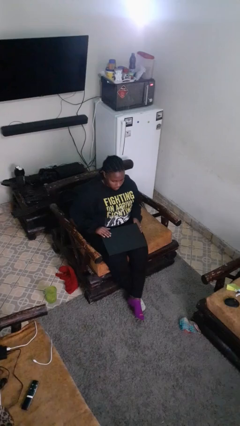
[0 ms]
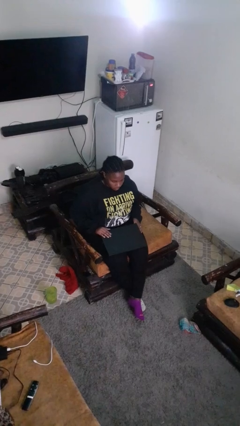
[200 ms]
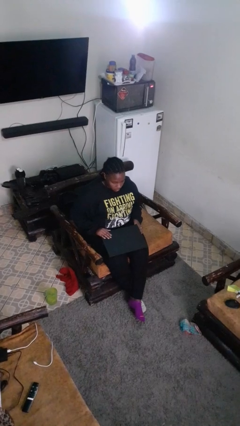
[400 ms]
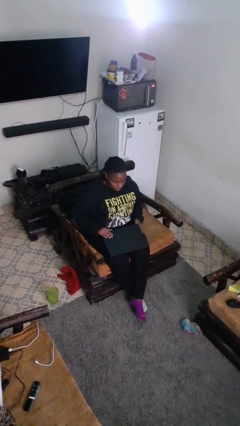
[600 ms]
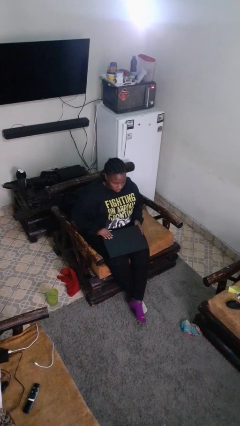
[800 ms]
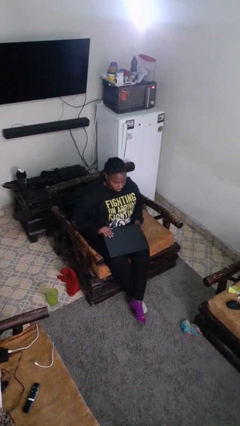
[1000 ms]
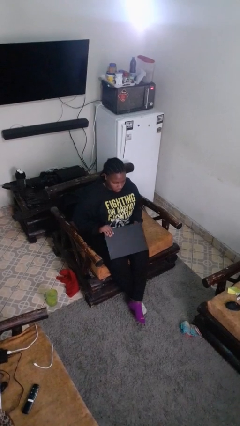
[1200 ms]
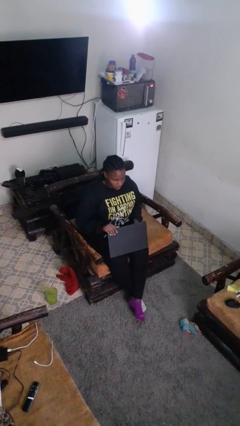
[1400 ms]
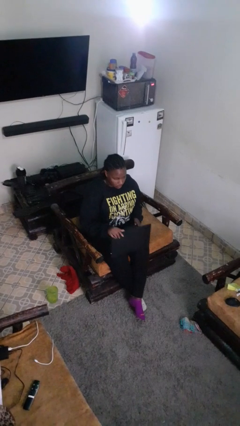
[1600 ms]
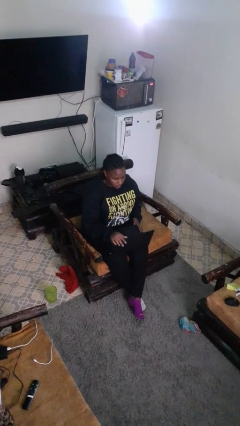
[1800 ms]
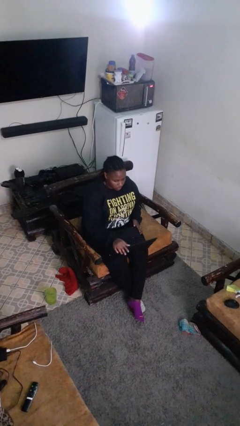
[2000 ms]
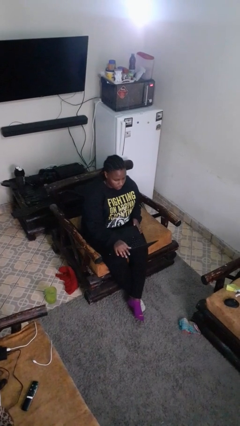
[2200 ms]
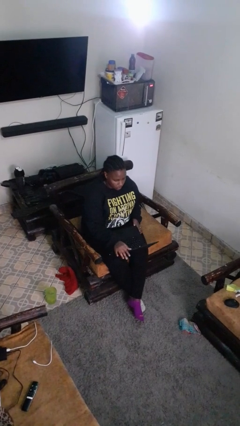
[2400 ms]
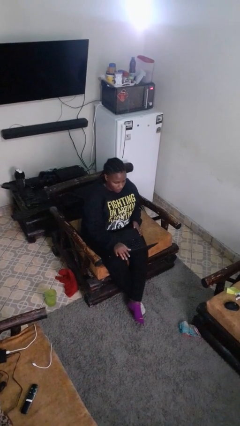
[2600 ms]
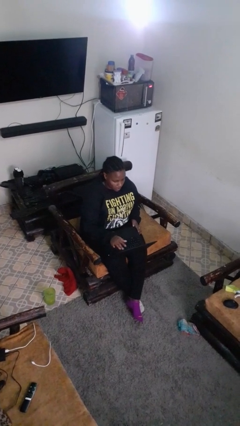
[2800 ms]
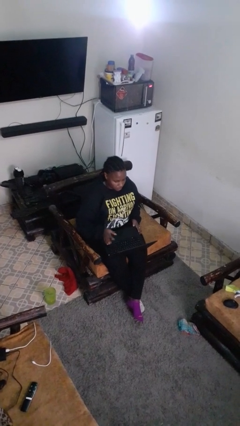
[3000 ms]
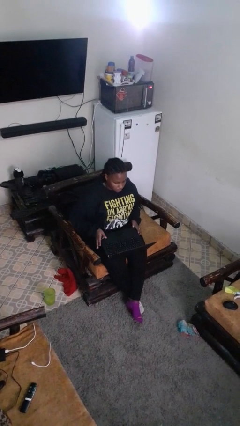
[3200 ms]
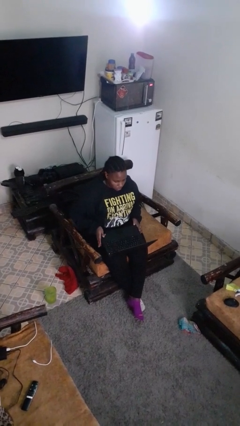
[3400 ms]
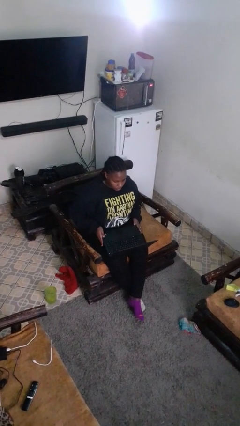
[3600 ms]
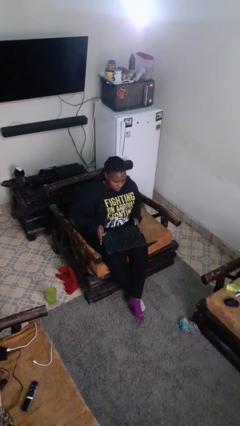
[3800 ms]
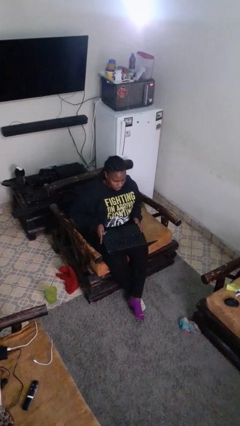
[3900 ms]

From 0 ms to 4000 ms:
person opens laptop

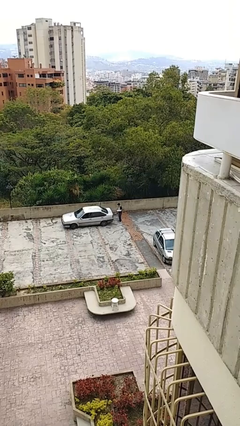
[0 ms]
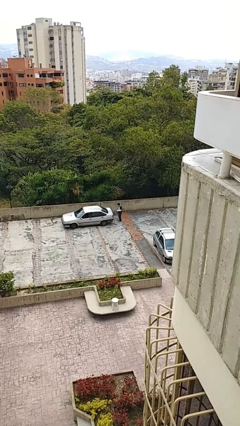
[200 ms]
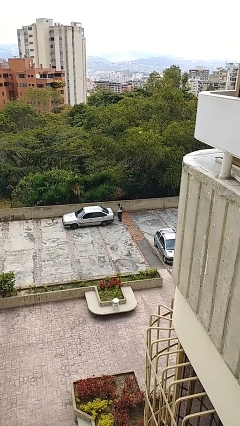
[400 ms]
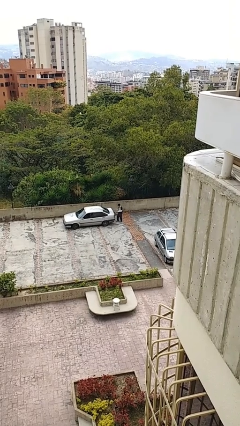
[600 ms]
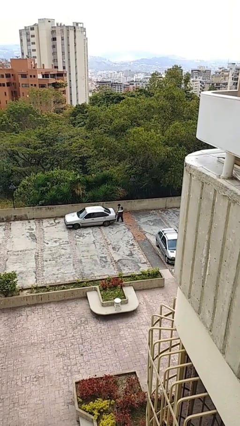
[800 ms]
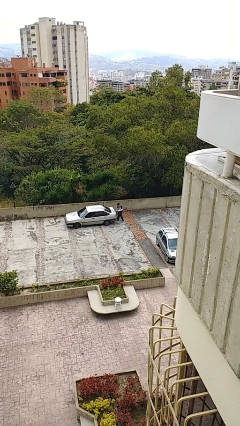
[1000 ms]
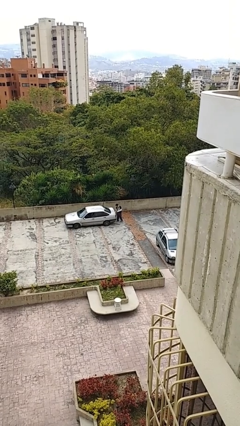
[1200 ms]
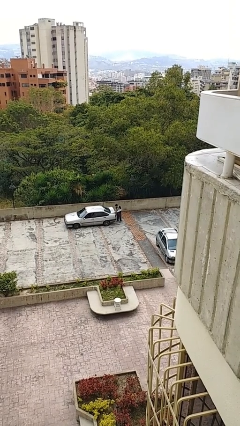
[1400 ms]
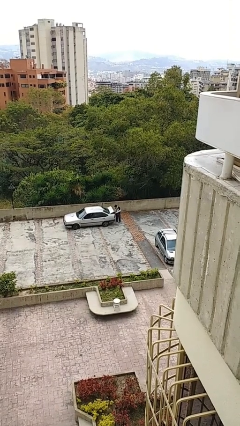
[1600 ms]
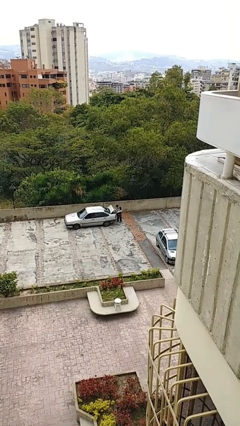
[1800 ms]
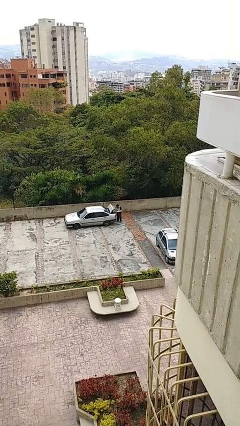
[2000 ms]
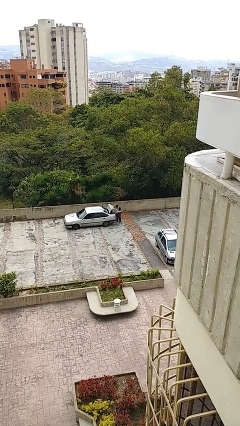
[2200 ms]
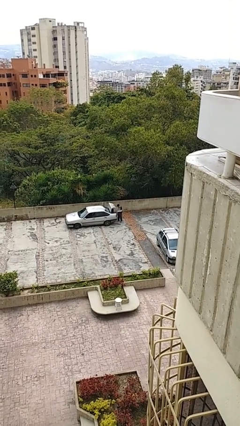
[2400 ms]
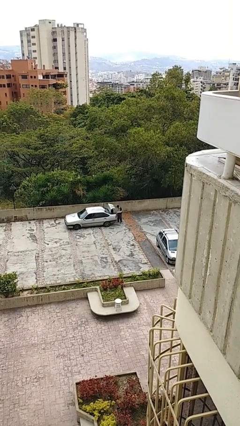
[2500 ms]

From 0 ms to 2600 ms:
person opens car trunk

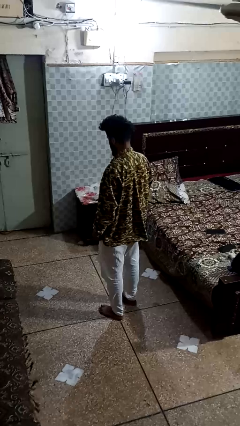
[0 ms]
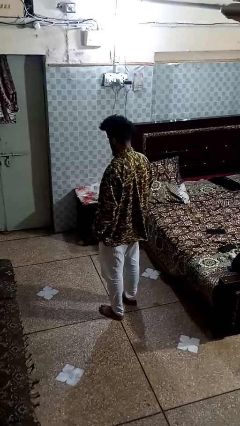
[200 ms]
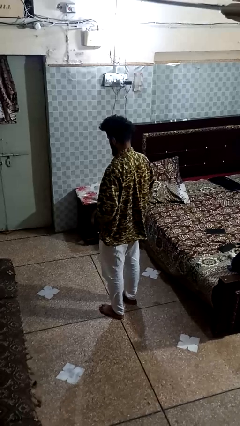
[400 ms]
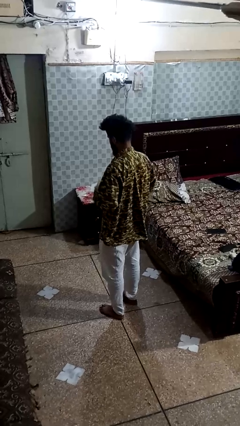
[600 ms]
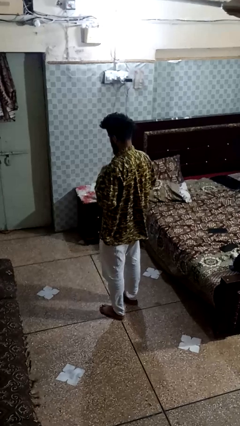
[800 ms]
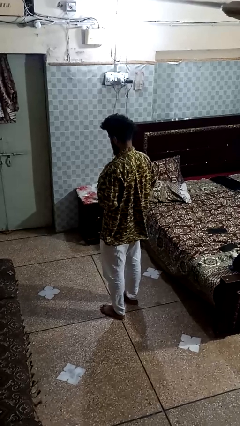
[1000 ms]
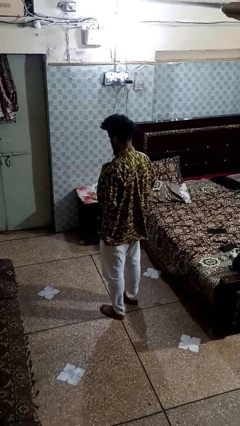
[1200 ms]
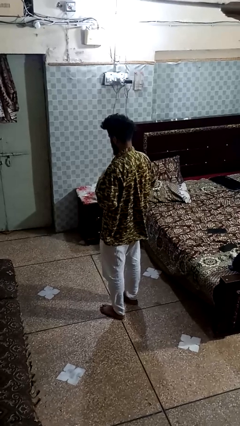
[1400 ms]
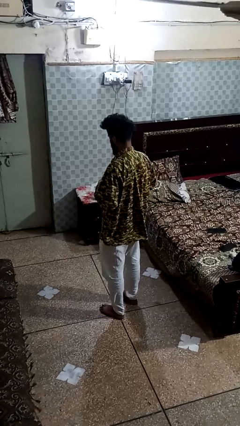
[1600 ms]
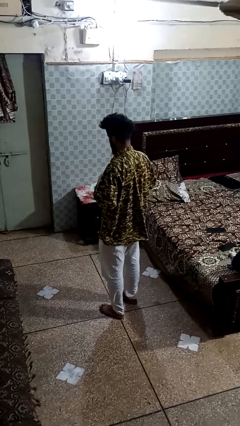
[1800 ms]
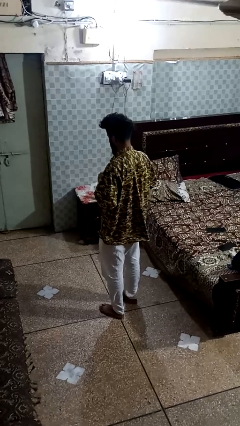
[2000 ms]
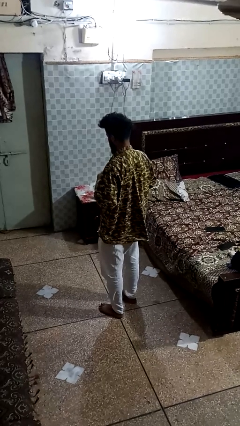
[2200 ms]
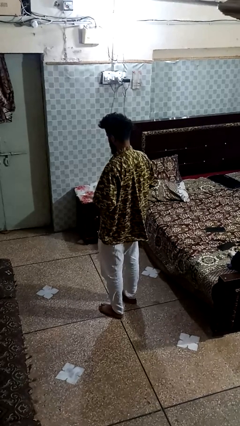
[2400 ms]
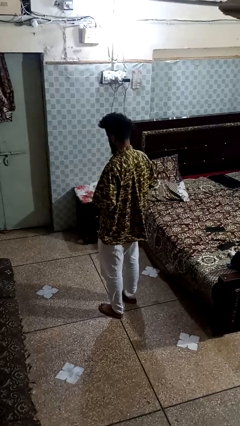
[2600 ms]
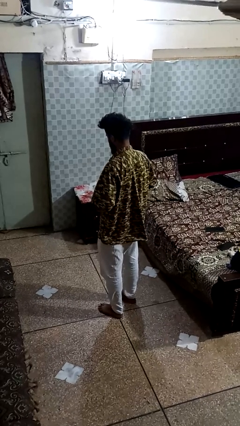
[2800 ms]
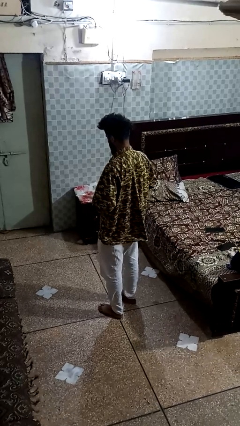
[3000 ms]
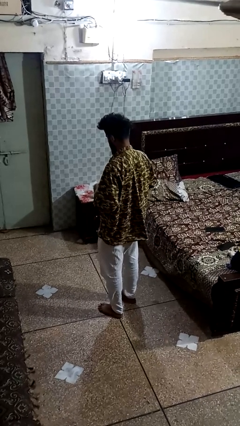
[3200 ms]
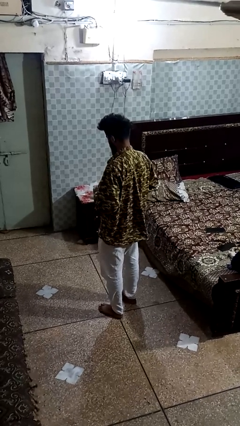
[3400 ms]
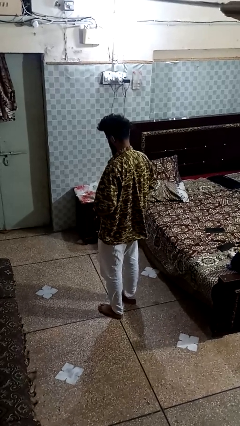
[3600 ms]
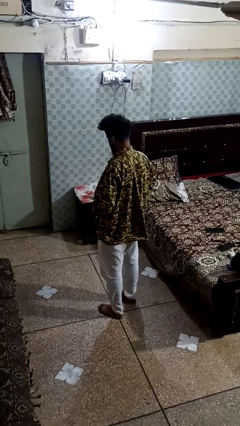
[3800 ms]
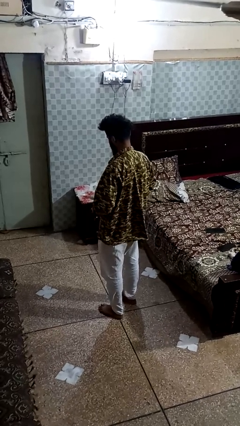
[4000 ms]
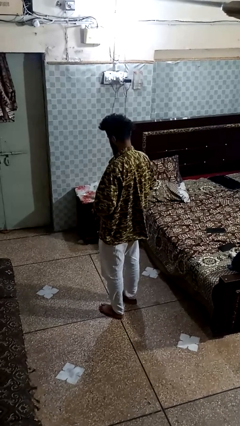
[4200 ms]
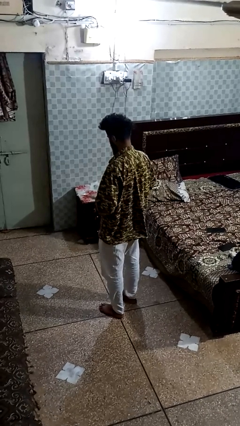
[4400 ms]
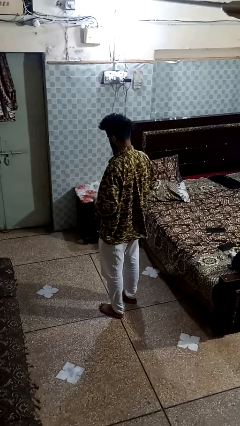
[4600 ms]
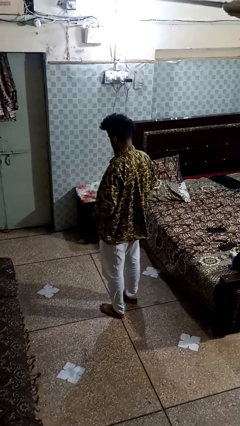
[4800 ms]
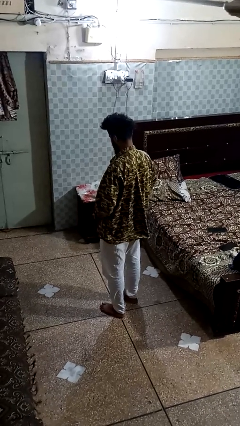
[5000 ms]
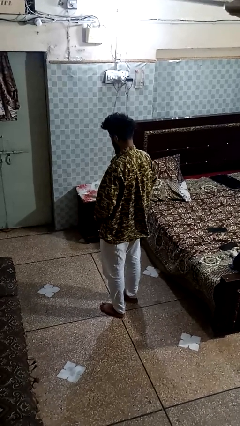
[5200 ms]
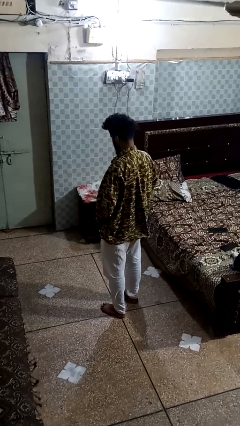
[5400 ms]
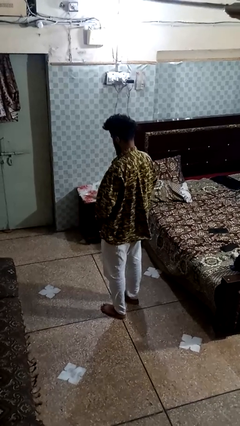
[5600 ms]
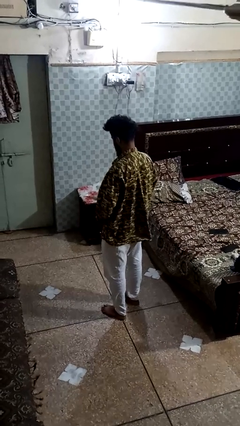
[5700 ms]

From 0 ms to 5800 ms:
person unbuttons shirt

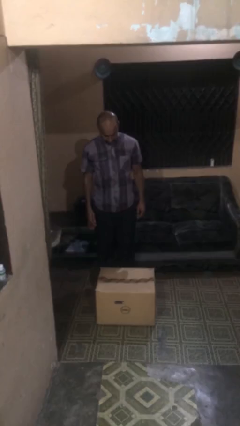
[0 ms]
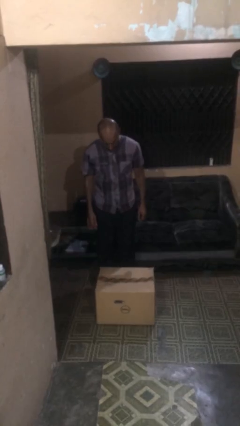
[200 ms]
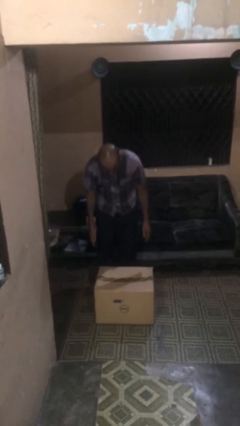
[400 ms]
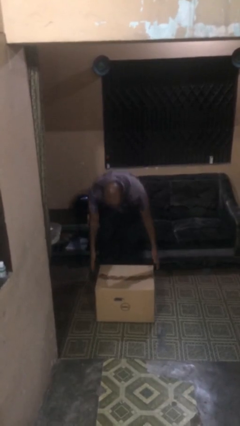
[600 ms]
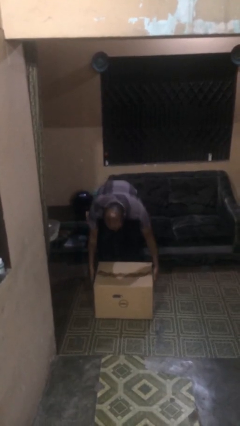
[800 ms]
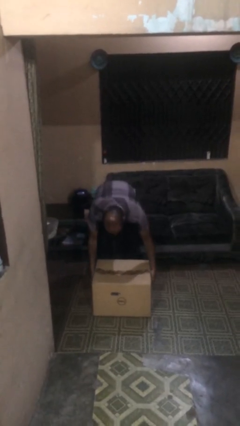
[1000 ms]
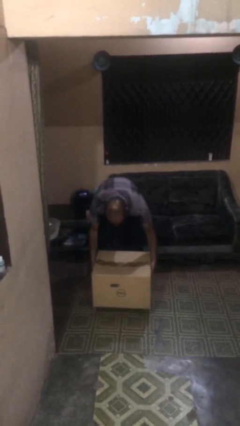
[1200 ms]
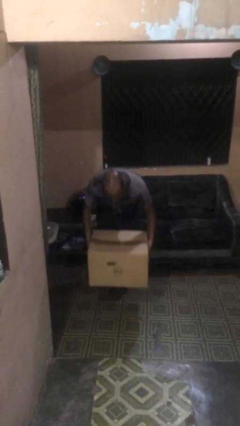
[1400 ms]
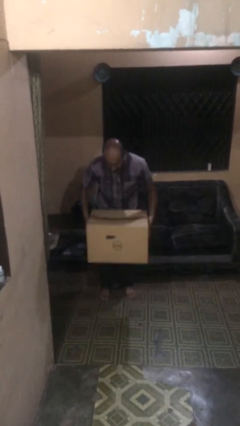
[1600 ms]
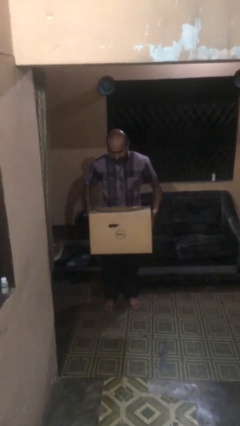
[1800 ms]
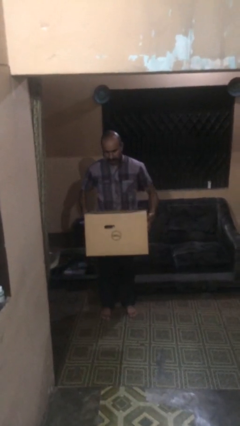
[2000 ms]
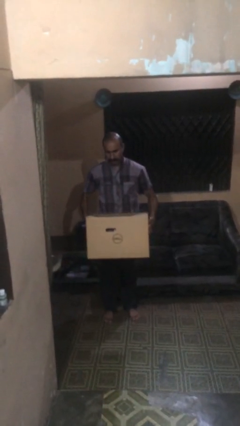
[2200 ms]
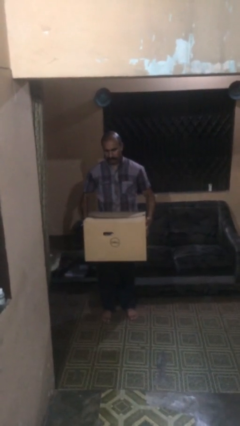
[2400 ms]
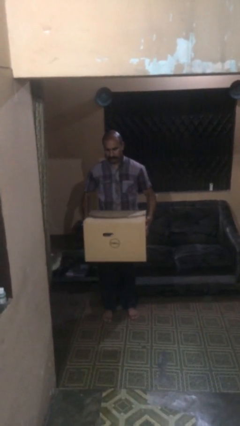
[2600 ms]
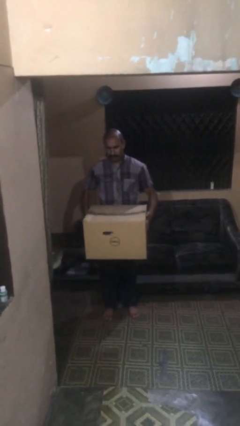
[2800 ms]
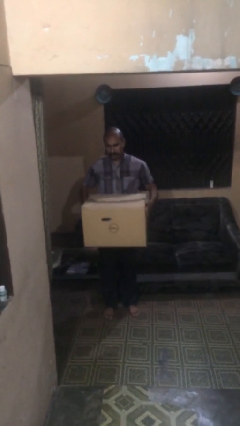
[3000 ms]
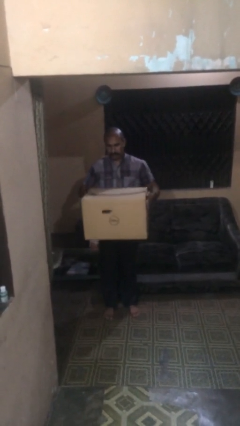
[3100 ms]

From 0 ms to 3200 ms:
person picks up object from floor

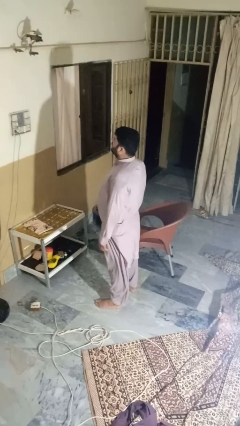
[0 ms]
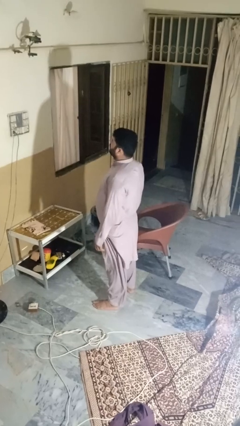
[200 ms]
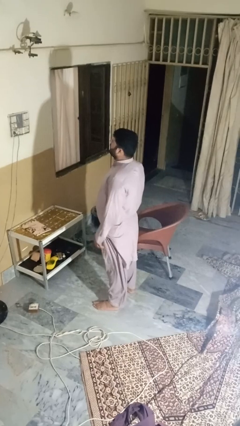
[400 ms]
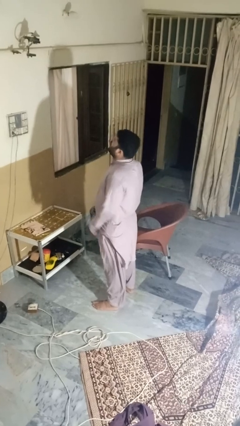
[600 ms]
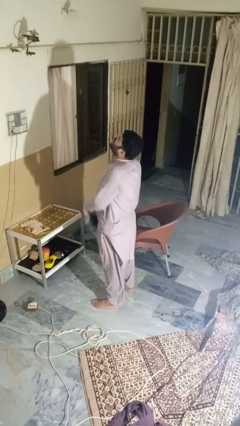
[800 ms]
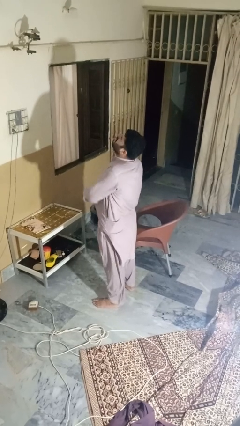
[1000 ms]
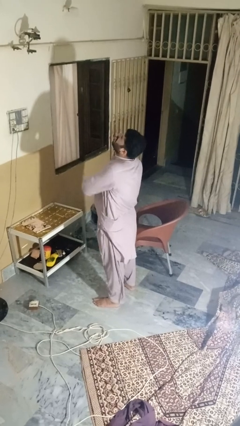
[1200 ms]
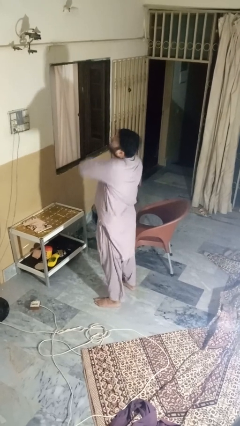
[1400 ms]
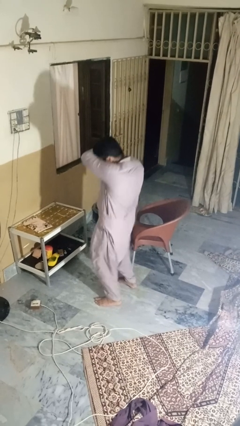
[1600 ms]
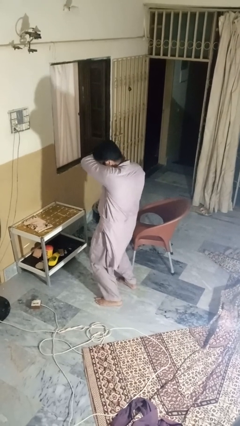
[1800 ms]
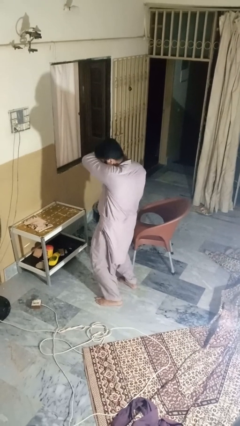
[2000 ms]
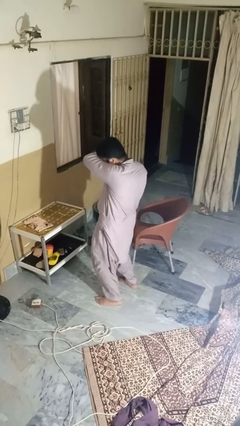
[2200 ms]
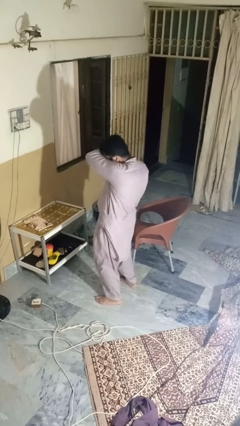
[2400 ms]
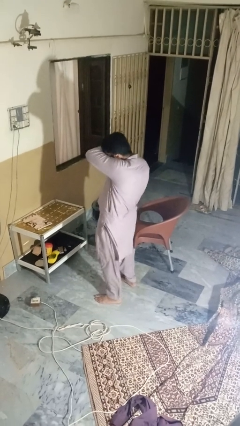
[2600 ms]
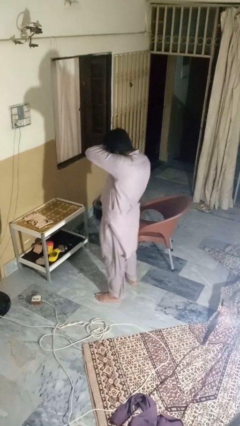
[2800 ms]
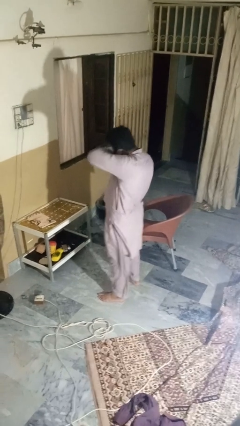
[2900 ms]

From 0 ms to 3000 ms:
person sneezes into arm
